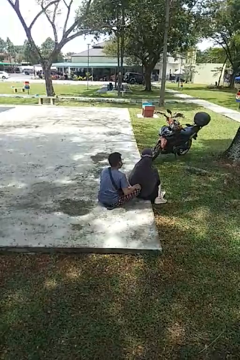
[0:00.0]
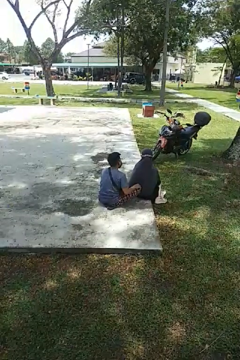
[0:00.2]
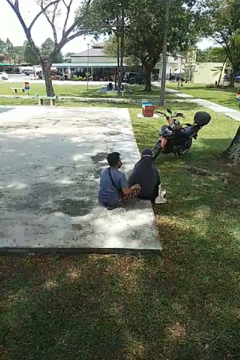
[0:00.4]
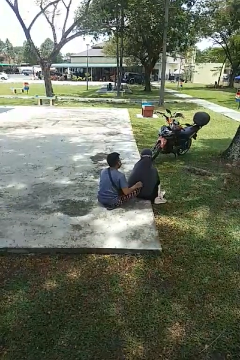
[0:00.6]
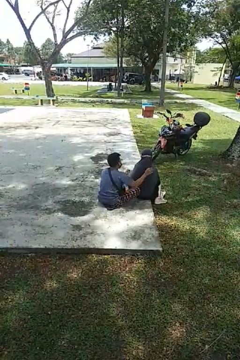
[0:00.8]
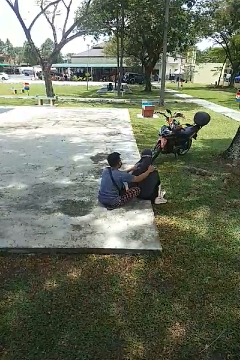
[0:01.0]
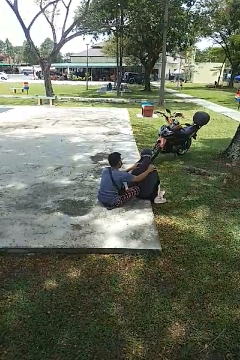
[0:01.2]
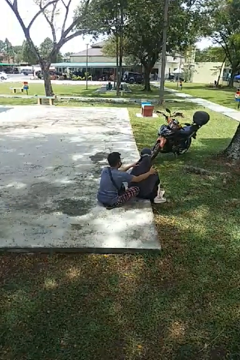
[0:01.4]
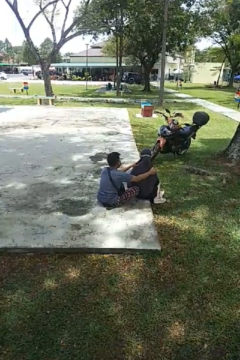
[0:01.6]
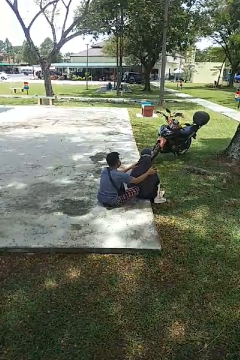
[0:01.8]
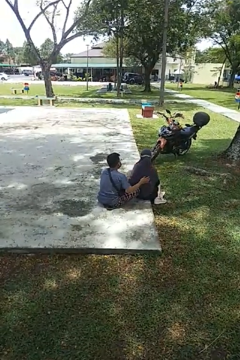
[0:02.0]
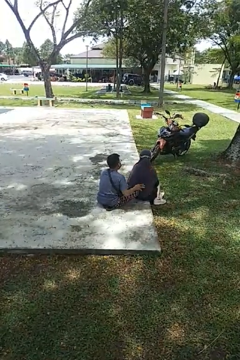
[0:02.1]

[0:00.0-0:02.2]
person pounds shoulders of person

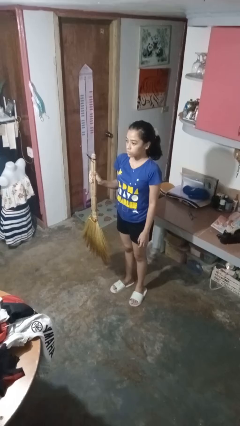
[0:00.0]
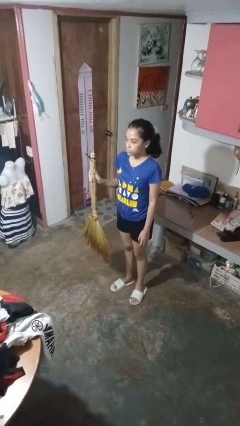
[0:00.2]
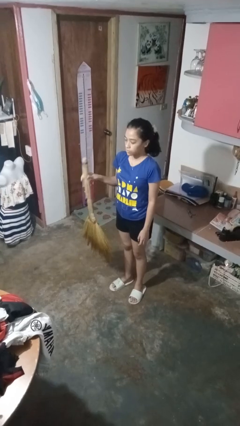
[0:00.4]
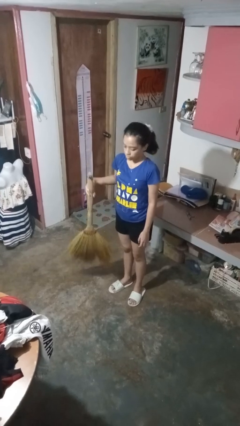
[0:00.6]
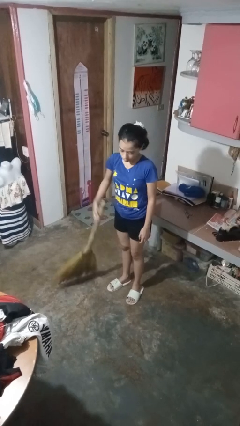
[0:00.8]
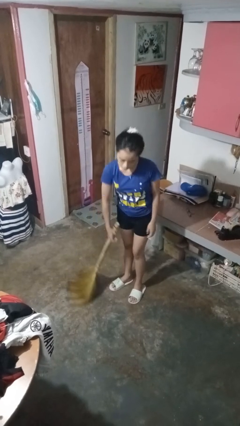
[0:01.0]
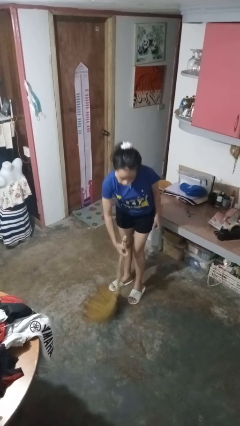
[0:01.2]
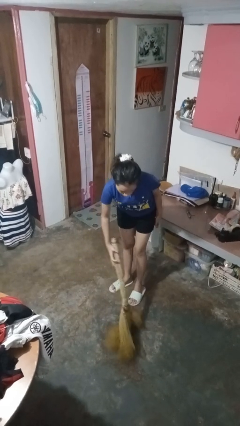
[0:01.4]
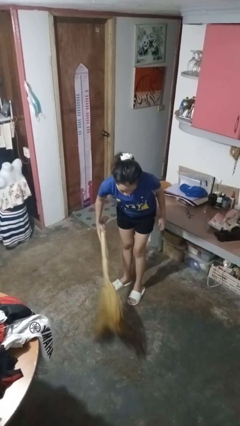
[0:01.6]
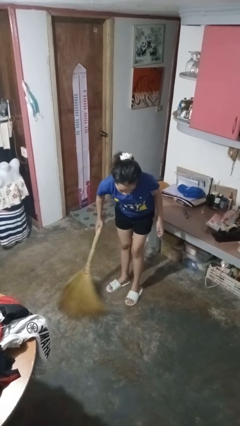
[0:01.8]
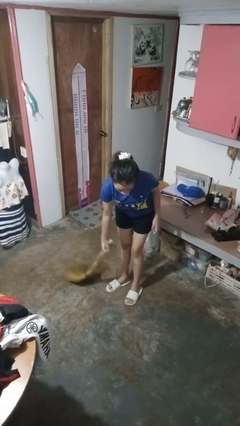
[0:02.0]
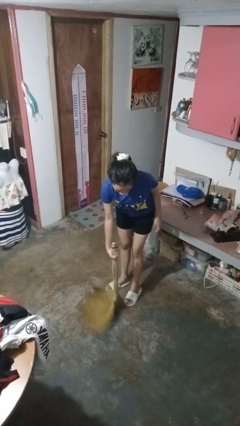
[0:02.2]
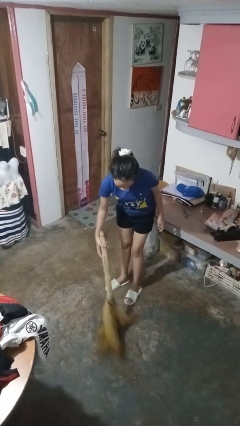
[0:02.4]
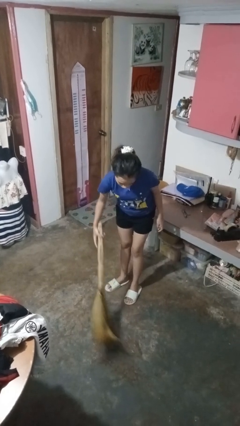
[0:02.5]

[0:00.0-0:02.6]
person sweeps floor

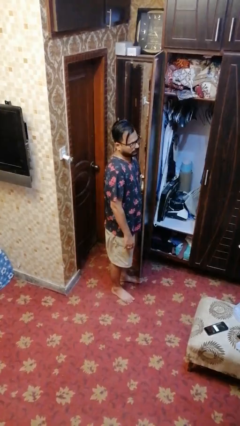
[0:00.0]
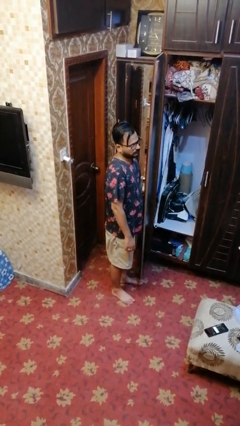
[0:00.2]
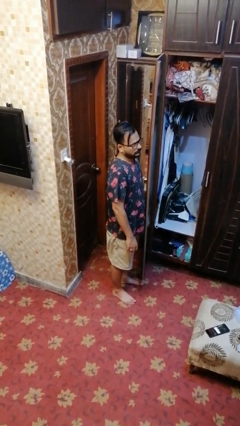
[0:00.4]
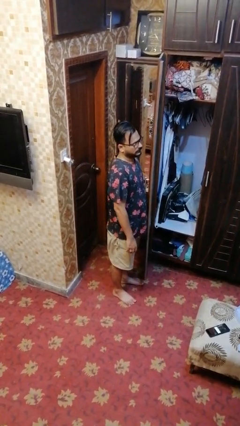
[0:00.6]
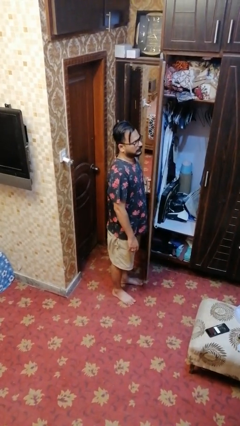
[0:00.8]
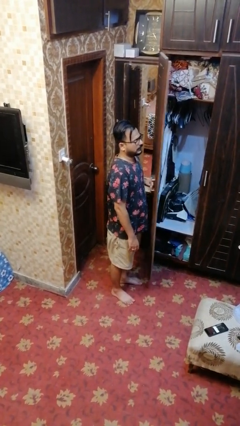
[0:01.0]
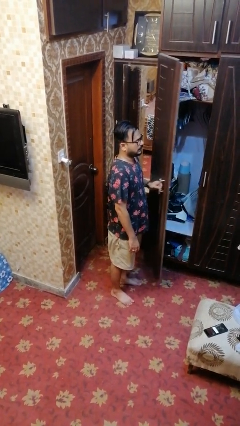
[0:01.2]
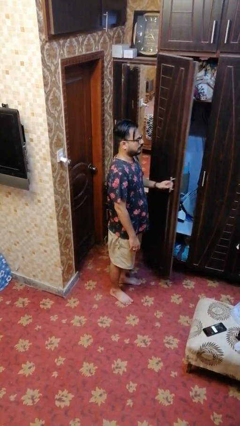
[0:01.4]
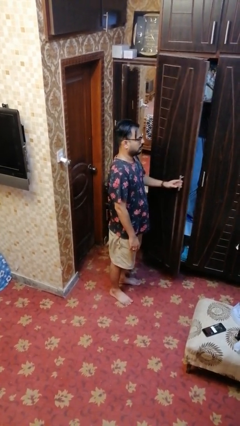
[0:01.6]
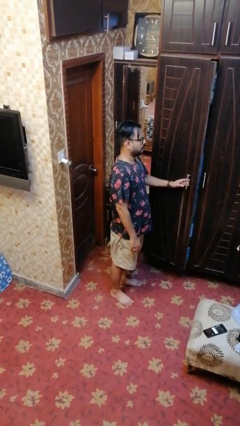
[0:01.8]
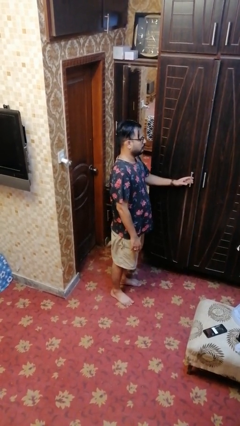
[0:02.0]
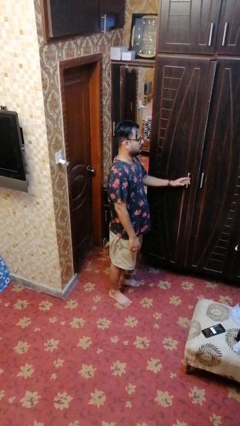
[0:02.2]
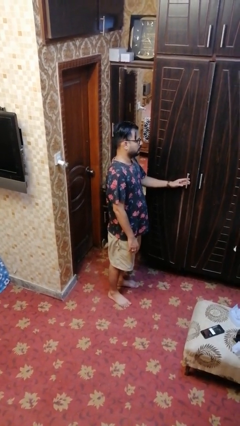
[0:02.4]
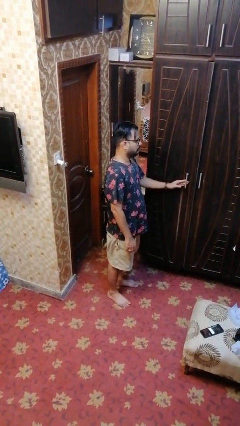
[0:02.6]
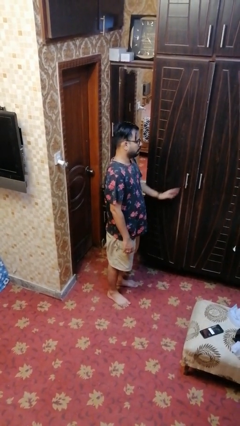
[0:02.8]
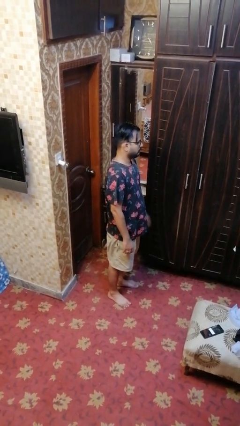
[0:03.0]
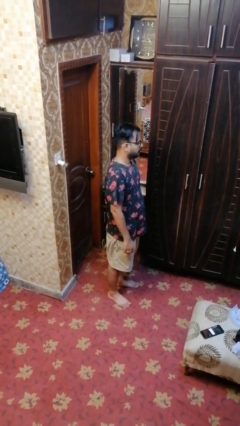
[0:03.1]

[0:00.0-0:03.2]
person closes closet door

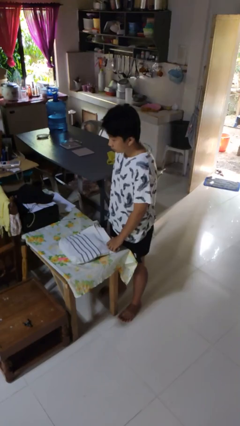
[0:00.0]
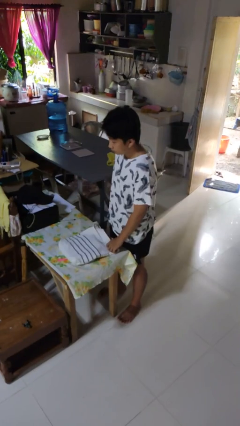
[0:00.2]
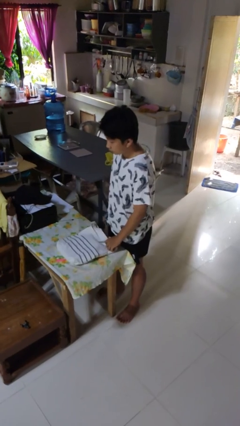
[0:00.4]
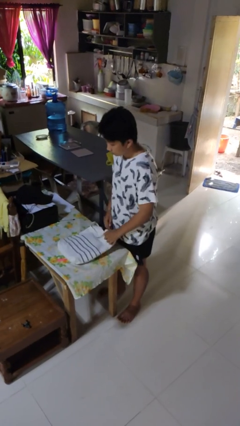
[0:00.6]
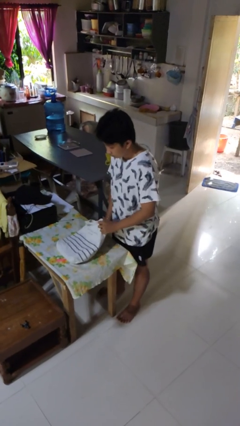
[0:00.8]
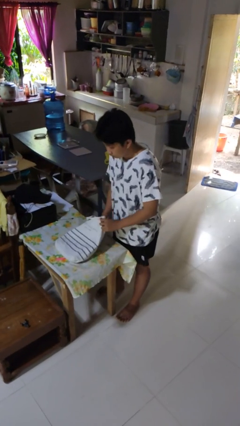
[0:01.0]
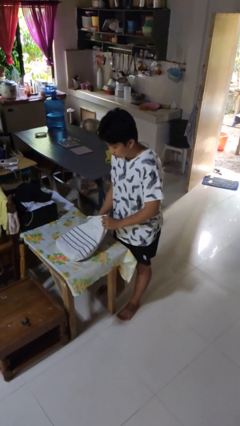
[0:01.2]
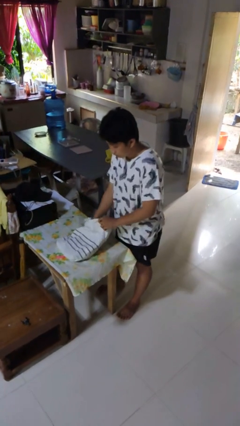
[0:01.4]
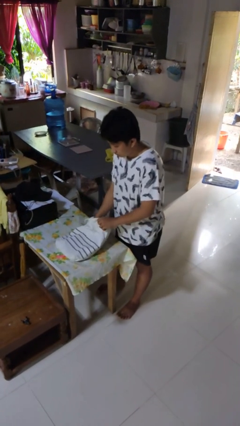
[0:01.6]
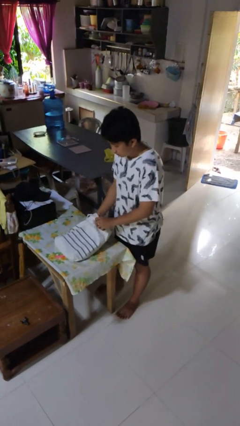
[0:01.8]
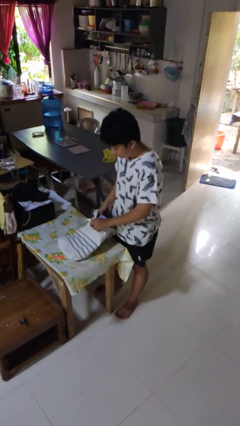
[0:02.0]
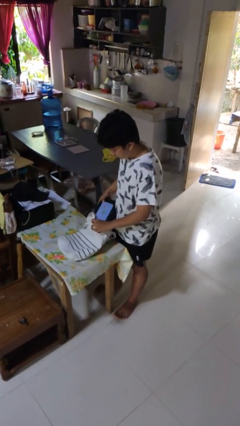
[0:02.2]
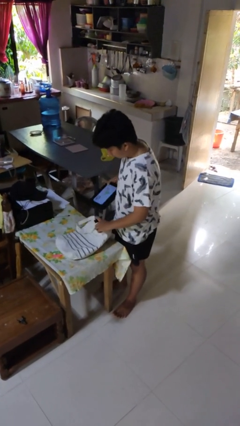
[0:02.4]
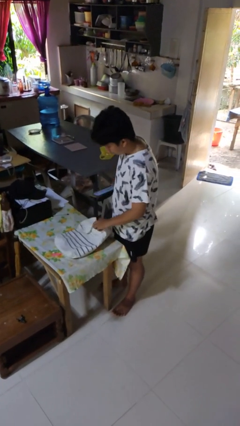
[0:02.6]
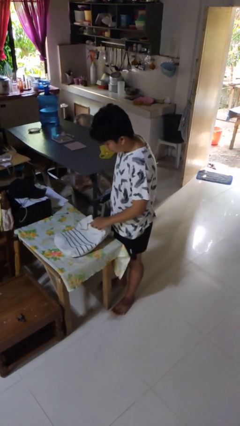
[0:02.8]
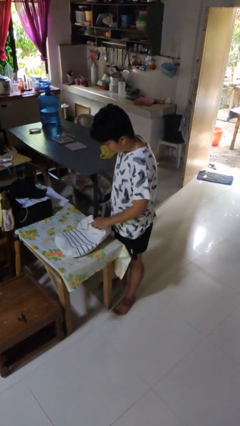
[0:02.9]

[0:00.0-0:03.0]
person takes object from bag

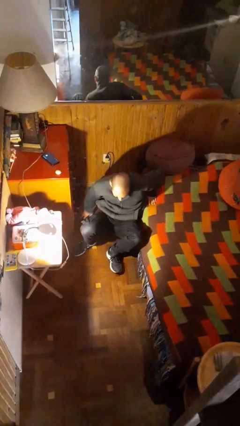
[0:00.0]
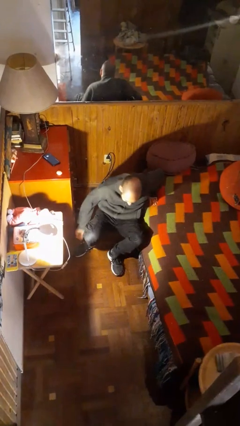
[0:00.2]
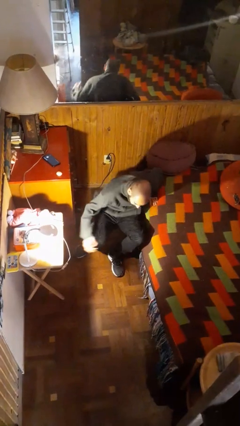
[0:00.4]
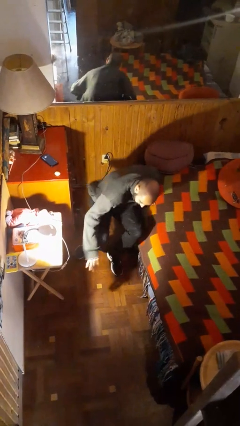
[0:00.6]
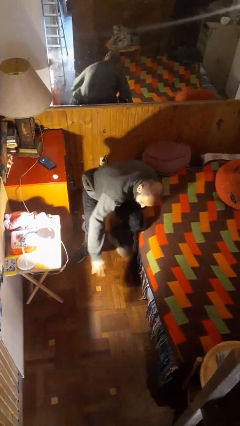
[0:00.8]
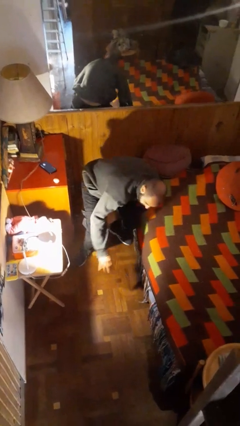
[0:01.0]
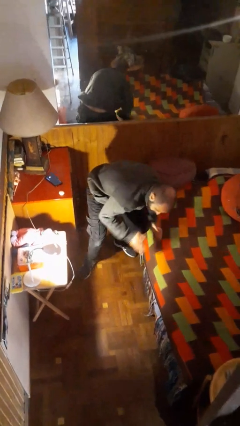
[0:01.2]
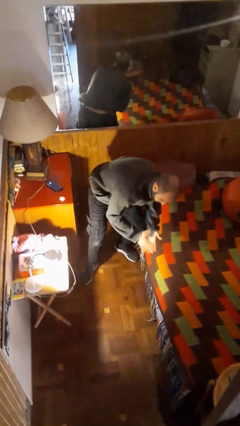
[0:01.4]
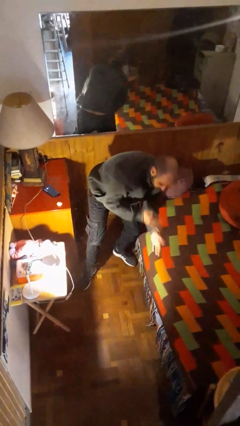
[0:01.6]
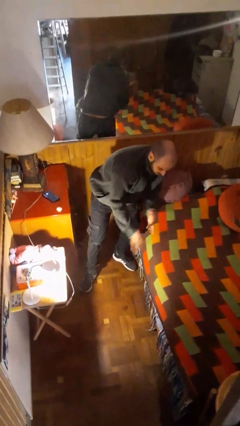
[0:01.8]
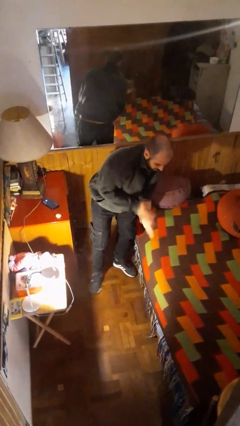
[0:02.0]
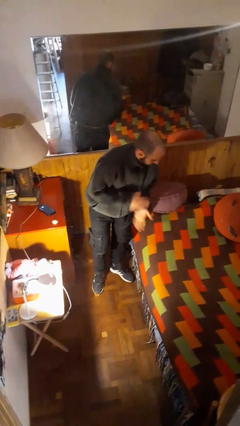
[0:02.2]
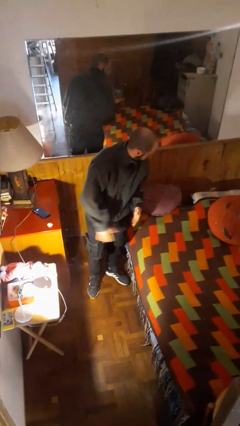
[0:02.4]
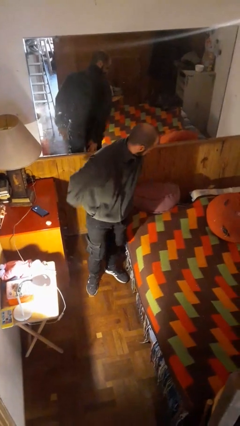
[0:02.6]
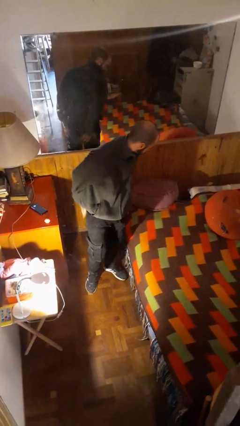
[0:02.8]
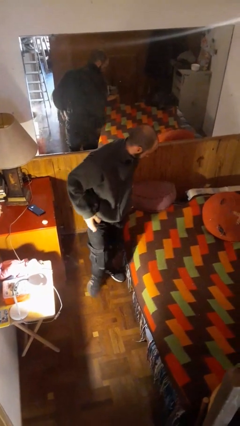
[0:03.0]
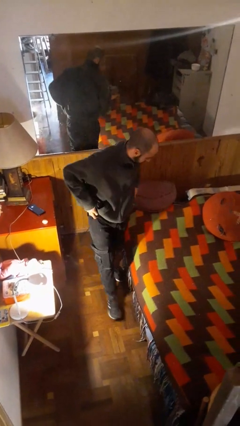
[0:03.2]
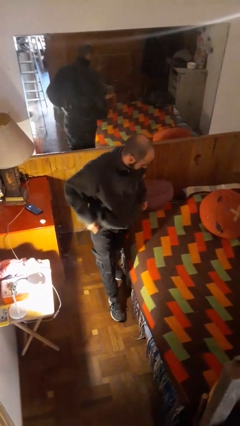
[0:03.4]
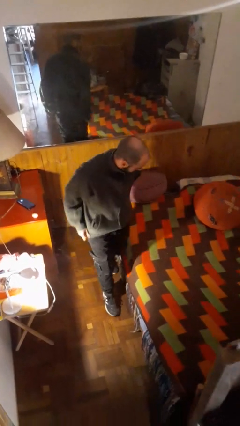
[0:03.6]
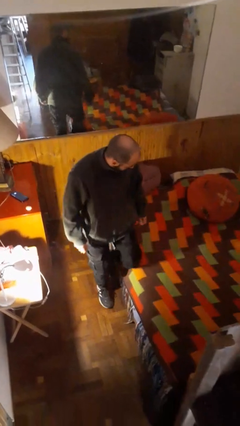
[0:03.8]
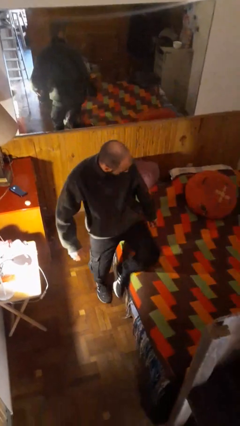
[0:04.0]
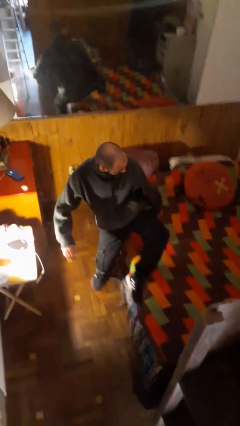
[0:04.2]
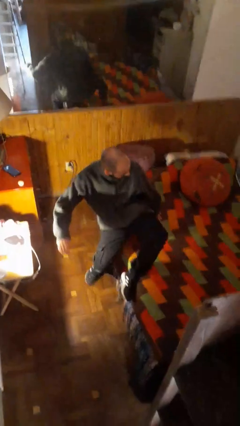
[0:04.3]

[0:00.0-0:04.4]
person stands up from floor

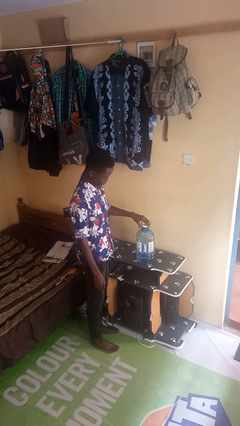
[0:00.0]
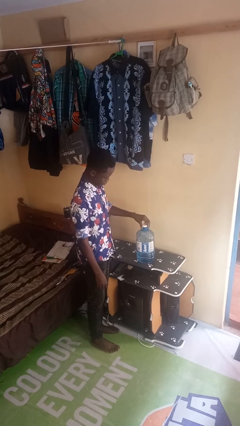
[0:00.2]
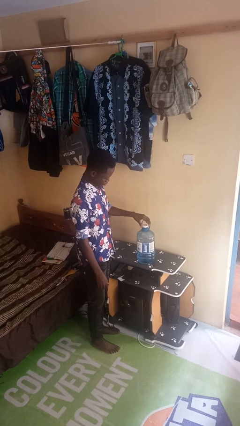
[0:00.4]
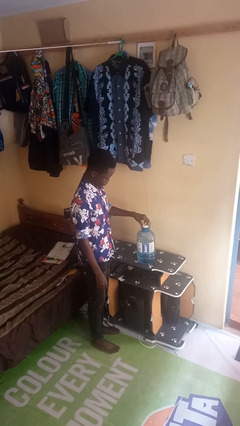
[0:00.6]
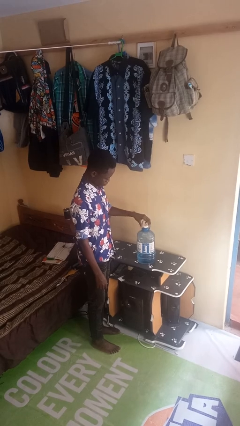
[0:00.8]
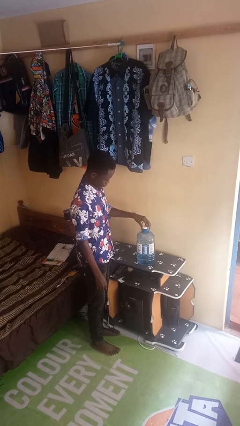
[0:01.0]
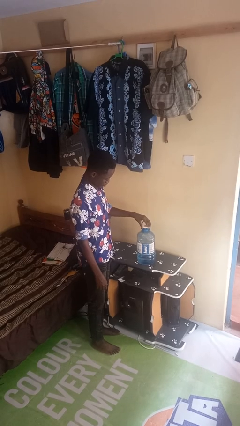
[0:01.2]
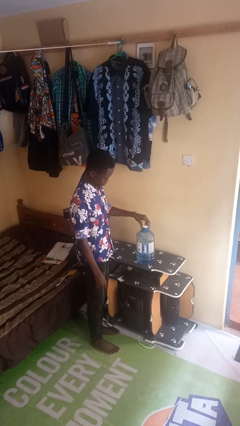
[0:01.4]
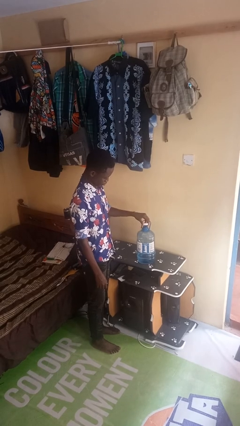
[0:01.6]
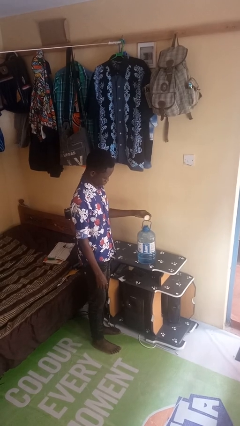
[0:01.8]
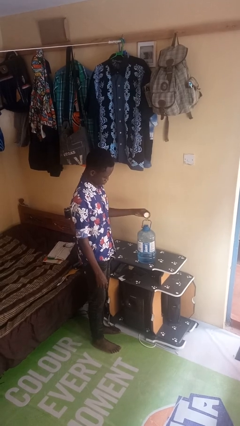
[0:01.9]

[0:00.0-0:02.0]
person unscrews lid from bottle

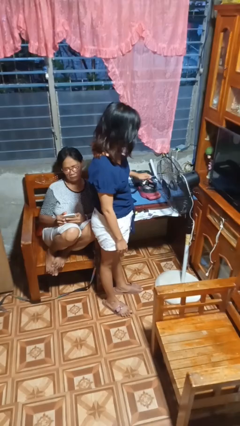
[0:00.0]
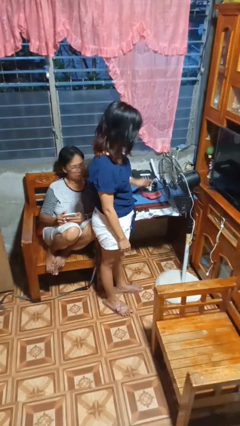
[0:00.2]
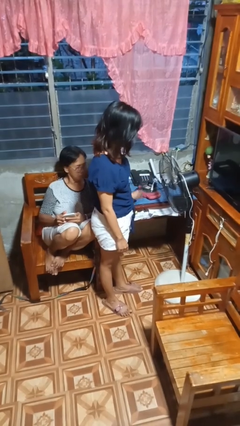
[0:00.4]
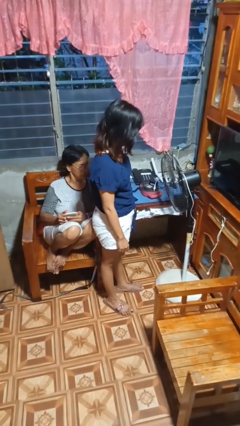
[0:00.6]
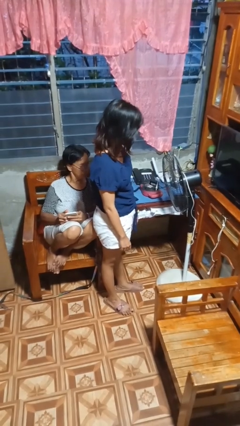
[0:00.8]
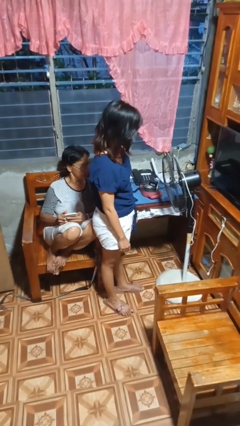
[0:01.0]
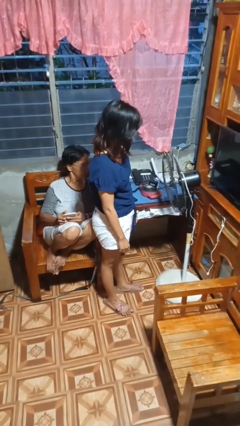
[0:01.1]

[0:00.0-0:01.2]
person unplugs from electrical socket
